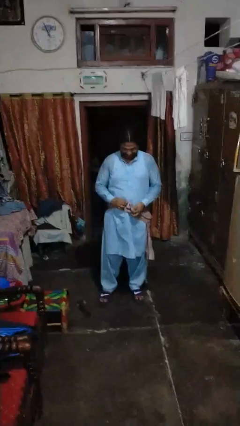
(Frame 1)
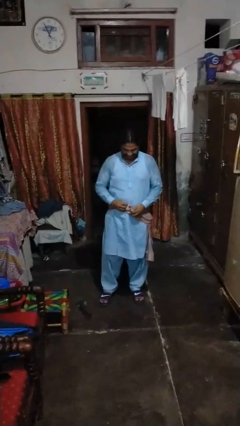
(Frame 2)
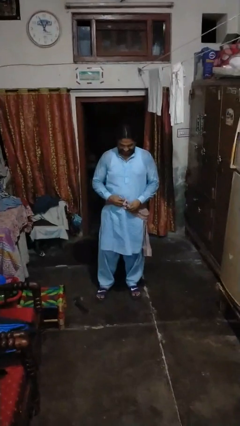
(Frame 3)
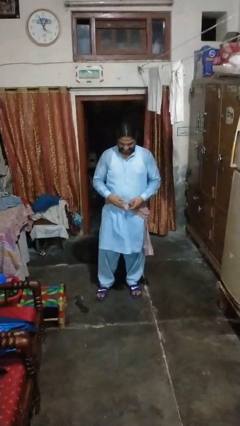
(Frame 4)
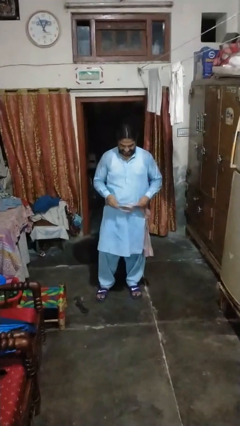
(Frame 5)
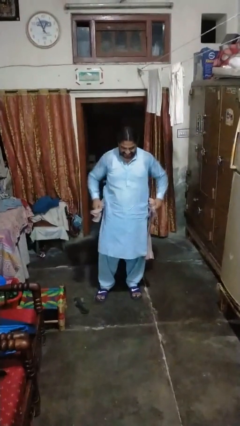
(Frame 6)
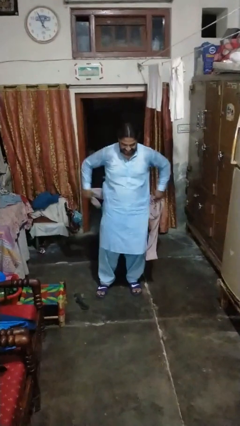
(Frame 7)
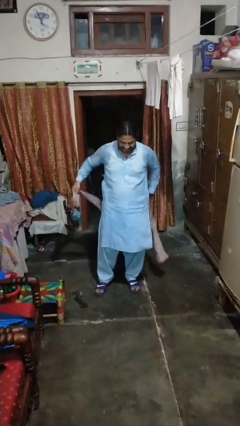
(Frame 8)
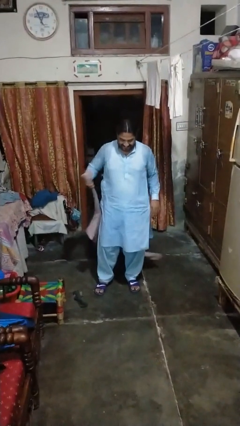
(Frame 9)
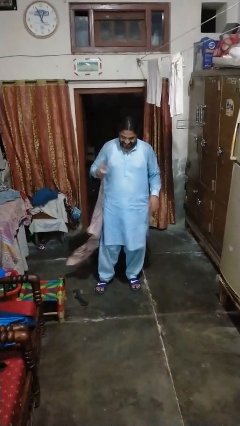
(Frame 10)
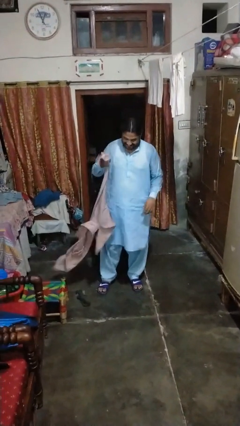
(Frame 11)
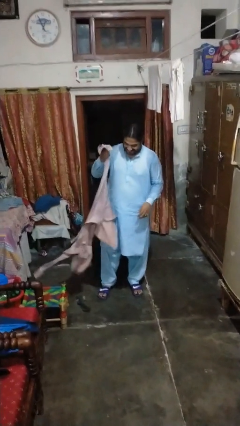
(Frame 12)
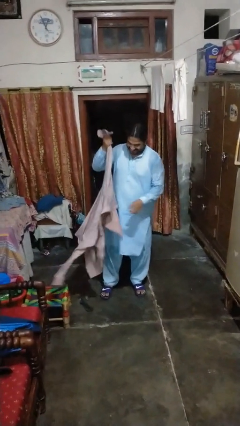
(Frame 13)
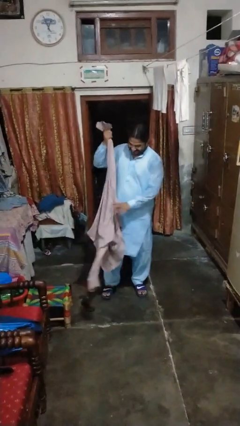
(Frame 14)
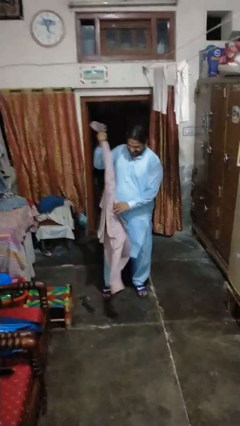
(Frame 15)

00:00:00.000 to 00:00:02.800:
person unties jacket around waist

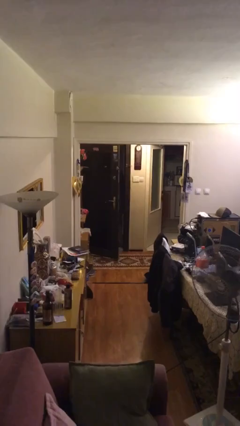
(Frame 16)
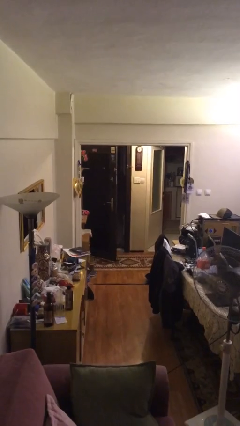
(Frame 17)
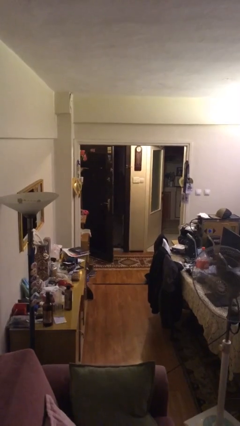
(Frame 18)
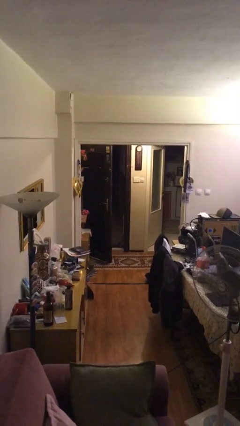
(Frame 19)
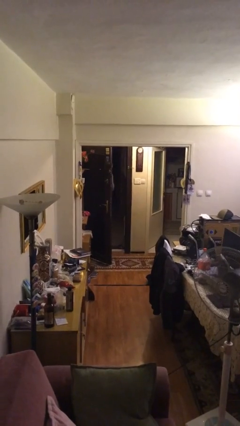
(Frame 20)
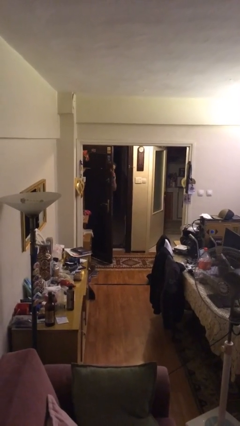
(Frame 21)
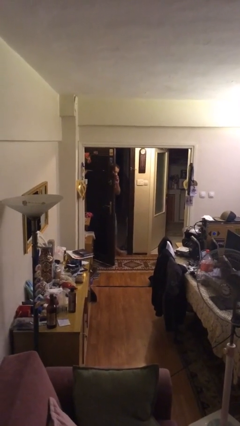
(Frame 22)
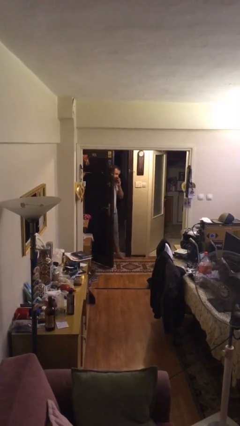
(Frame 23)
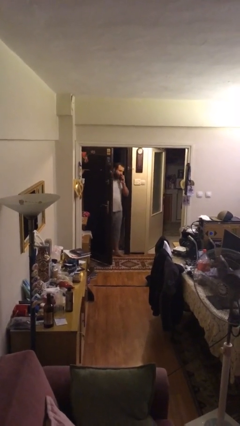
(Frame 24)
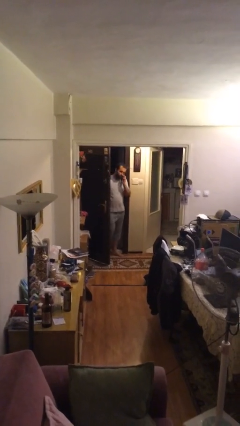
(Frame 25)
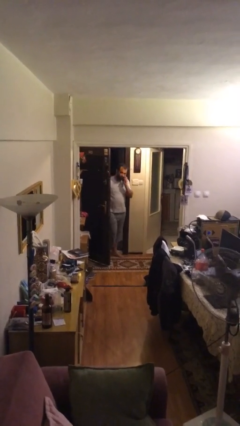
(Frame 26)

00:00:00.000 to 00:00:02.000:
person opens facility door

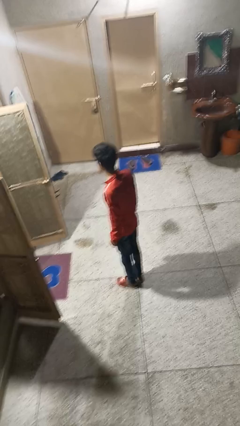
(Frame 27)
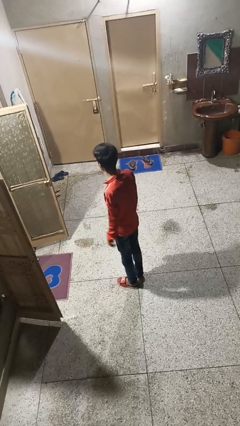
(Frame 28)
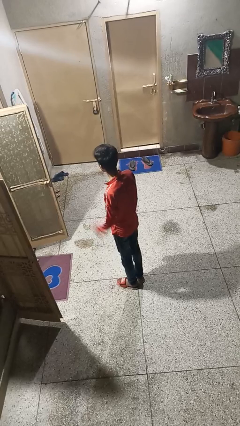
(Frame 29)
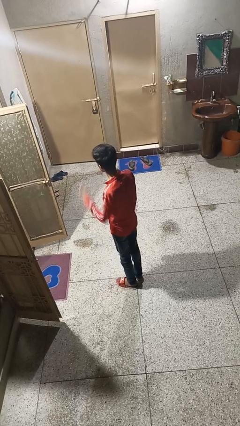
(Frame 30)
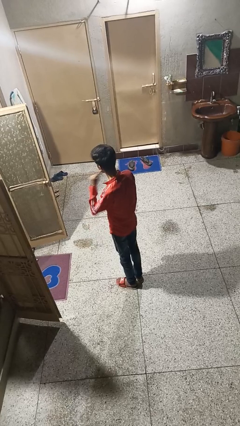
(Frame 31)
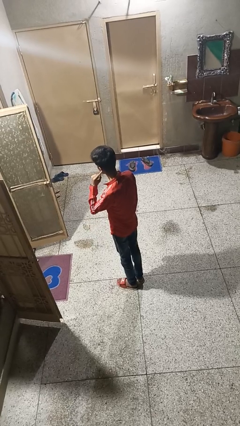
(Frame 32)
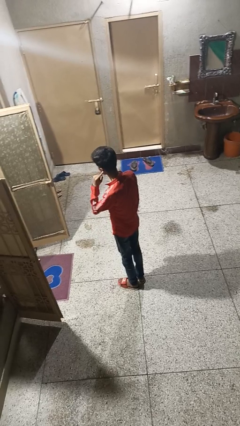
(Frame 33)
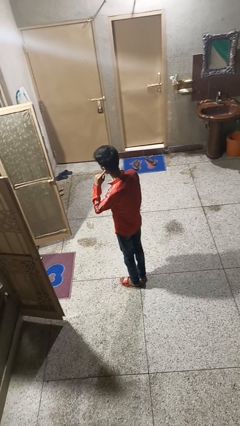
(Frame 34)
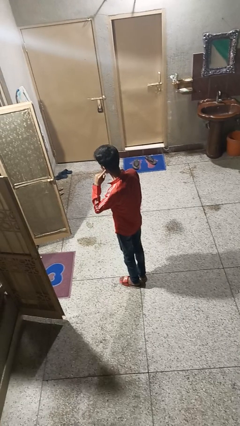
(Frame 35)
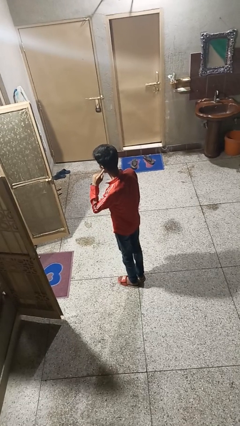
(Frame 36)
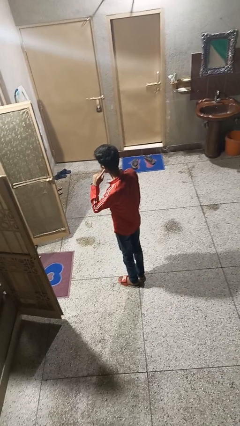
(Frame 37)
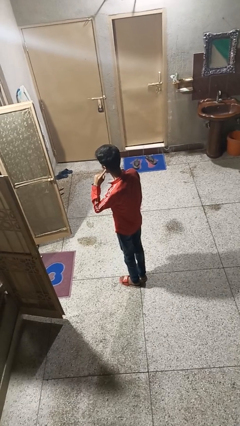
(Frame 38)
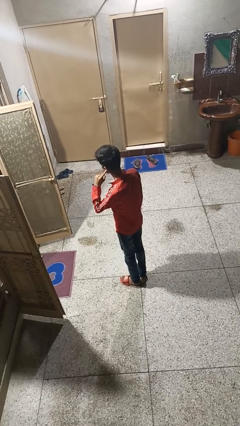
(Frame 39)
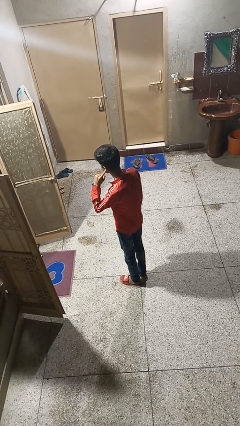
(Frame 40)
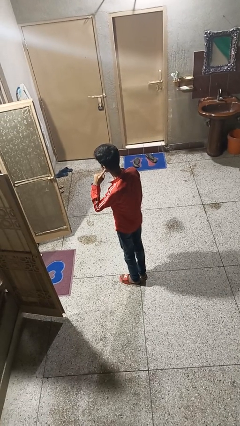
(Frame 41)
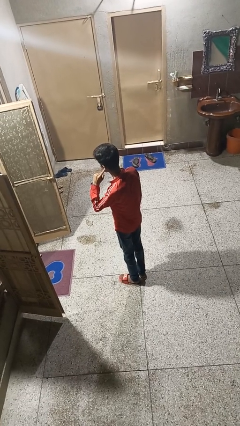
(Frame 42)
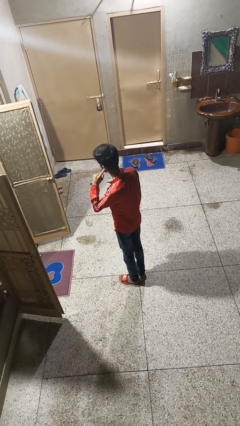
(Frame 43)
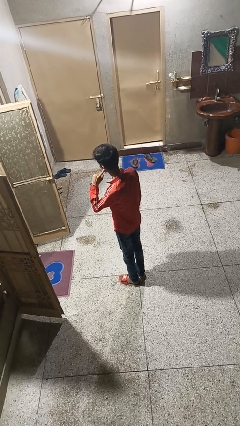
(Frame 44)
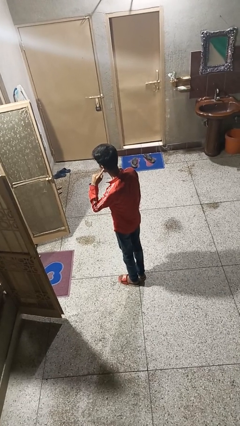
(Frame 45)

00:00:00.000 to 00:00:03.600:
person gestures listen closely

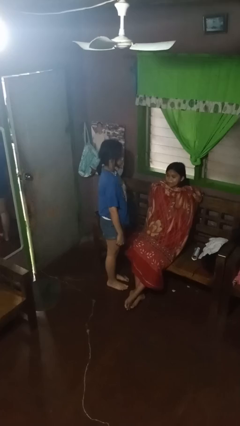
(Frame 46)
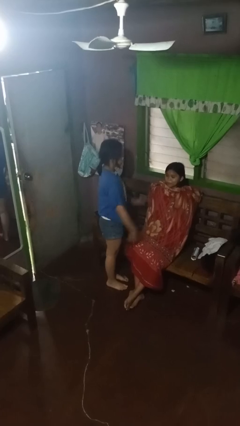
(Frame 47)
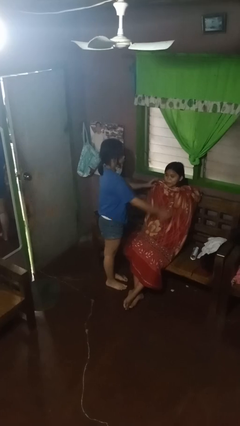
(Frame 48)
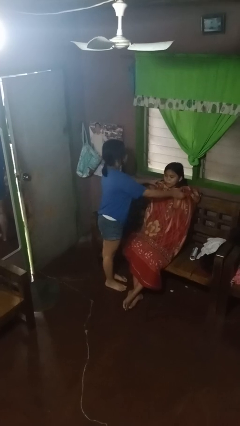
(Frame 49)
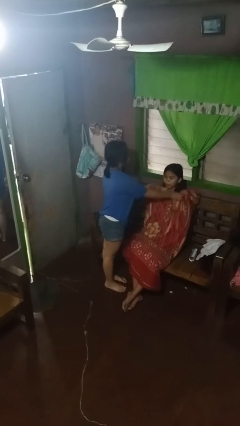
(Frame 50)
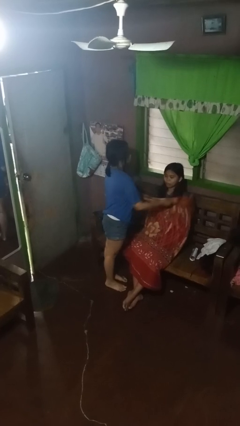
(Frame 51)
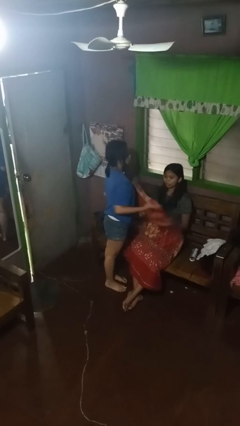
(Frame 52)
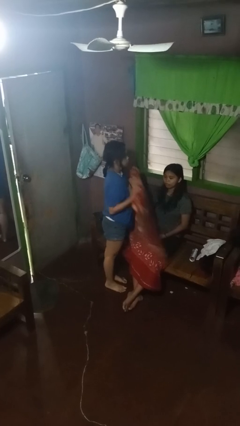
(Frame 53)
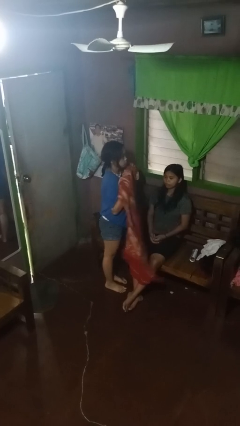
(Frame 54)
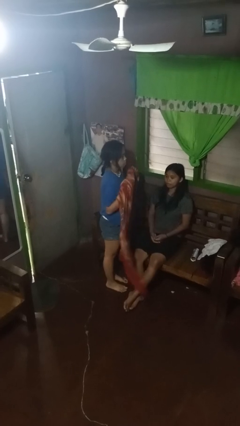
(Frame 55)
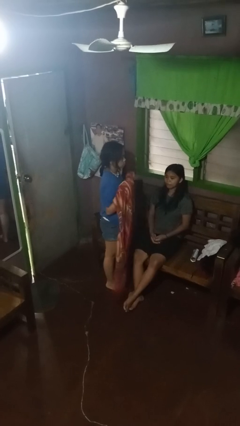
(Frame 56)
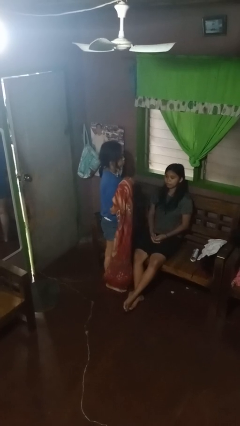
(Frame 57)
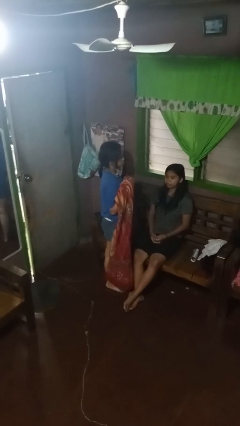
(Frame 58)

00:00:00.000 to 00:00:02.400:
person uncovers friend with blanket

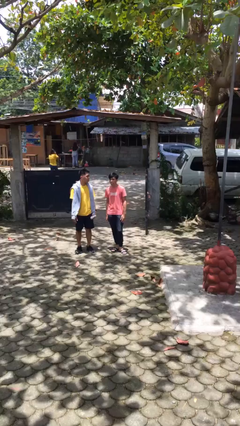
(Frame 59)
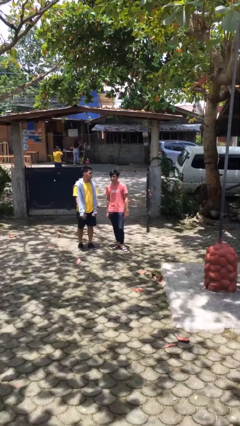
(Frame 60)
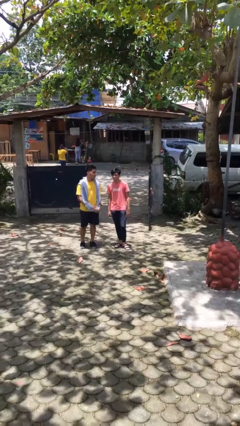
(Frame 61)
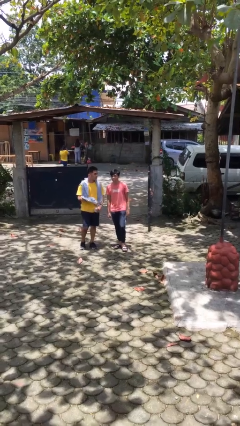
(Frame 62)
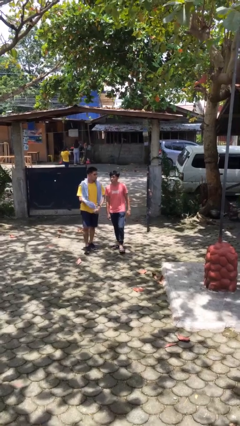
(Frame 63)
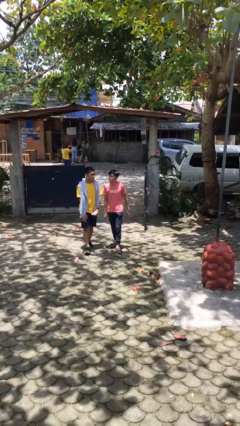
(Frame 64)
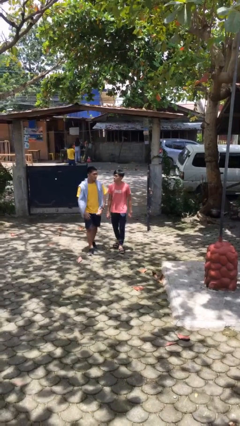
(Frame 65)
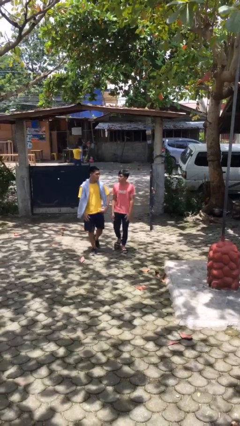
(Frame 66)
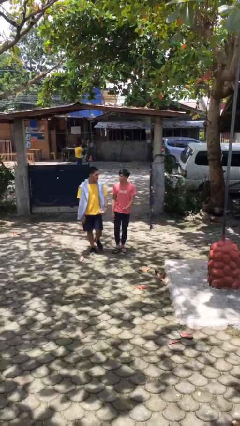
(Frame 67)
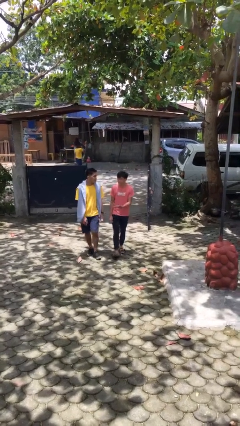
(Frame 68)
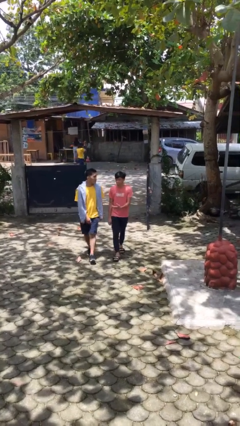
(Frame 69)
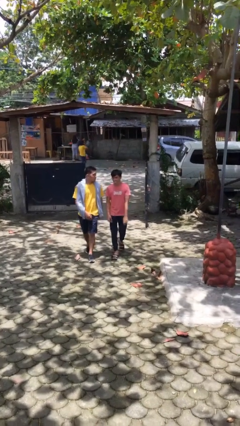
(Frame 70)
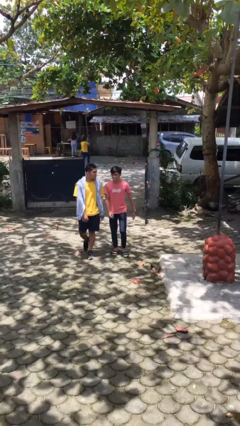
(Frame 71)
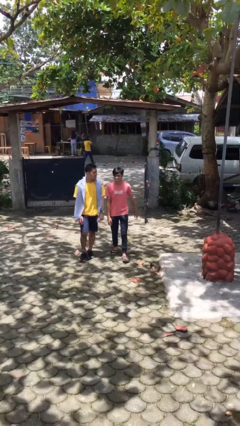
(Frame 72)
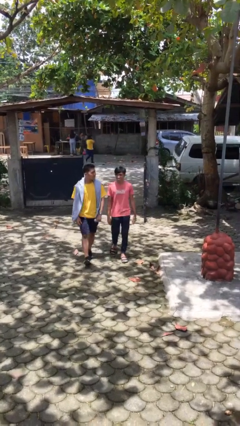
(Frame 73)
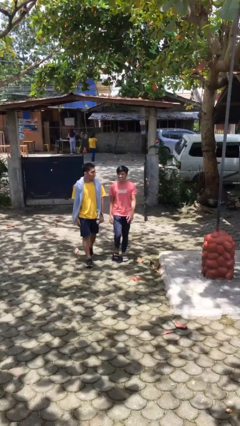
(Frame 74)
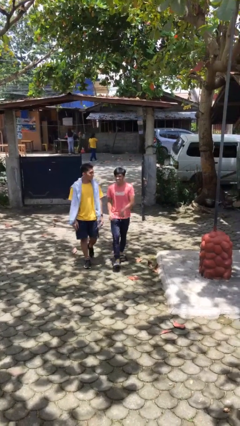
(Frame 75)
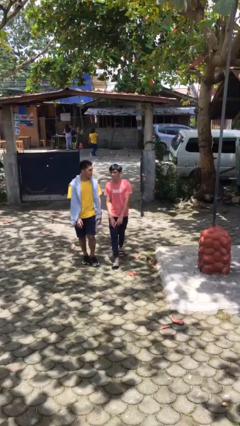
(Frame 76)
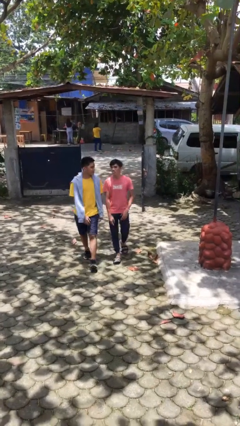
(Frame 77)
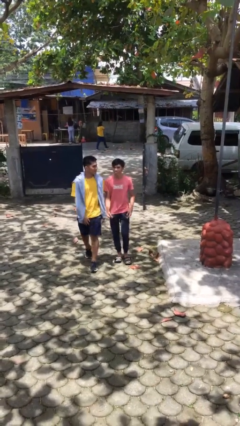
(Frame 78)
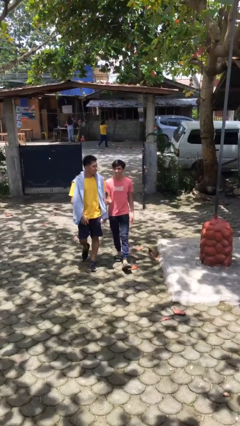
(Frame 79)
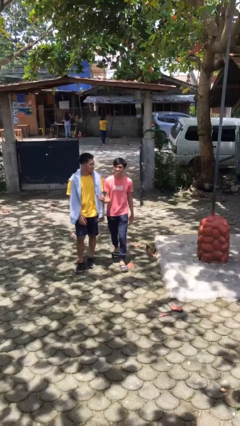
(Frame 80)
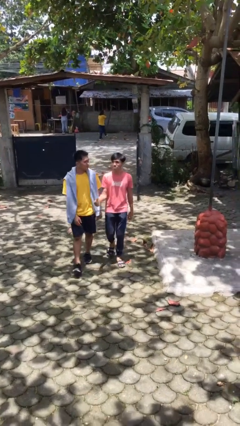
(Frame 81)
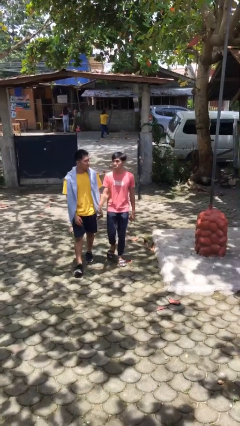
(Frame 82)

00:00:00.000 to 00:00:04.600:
person talks to person

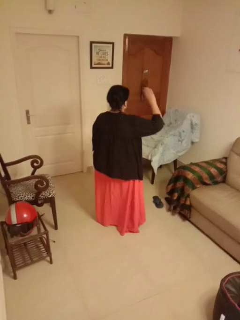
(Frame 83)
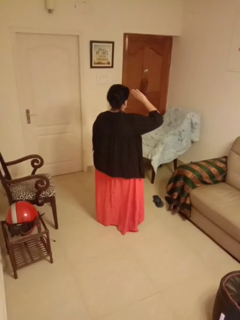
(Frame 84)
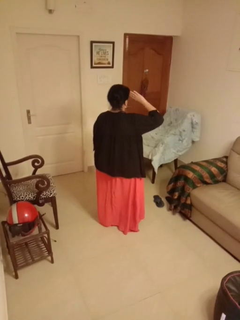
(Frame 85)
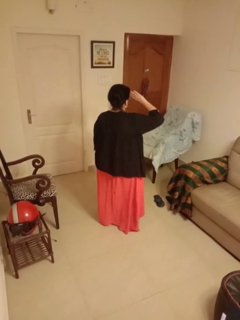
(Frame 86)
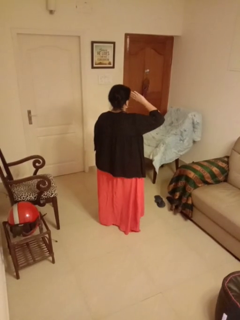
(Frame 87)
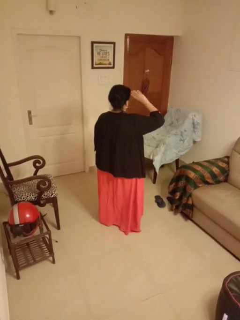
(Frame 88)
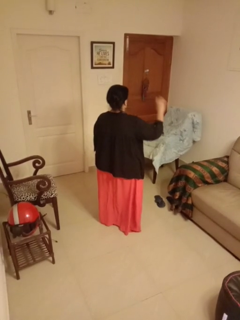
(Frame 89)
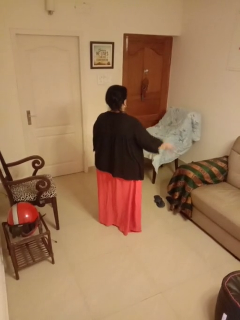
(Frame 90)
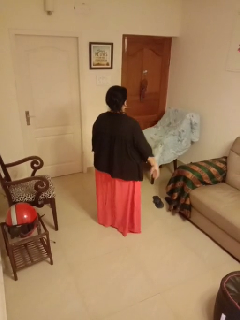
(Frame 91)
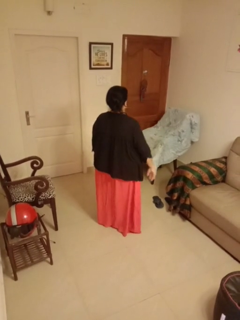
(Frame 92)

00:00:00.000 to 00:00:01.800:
person salutes

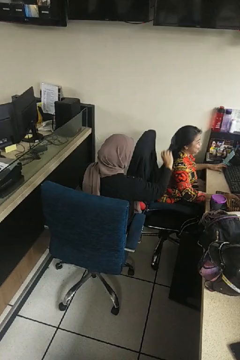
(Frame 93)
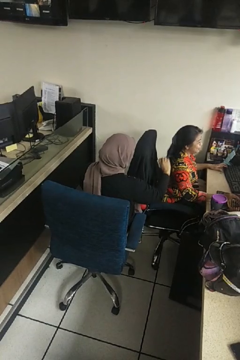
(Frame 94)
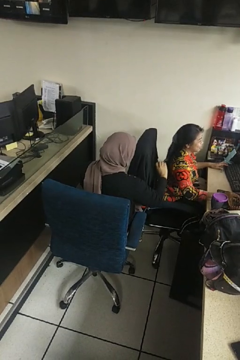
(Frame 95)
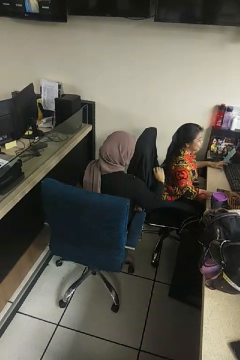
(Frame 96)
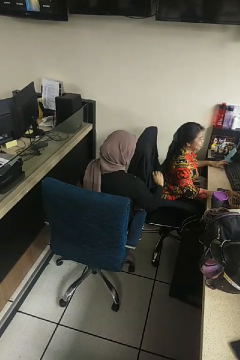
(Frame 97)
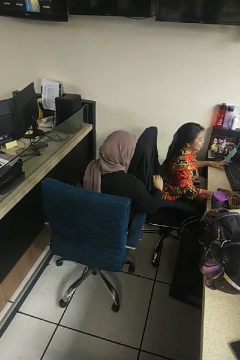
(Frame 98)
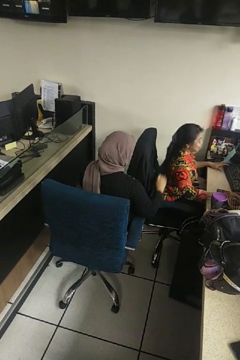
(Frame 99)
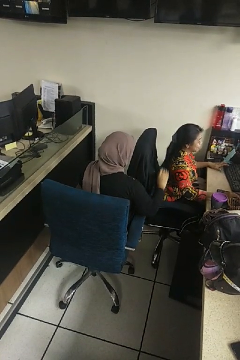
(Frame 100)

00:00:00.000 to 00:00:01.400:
person brushes hair of person
